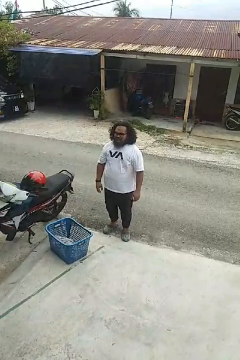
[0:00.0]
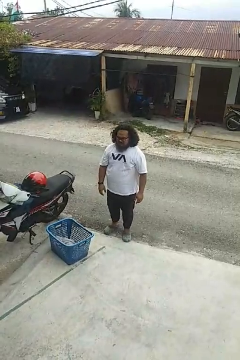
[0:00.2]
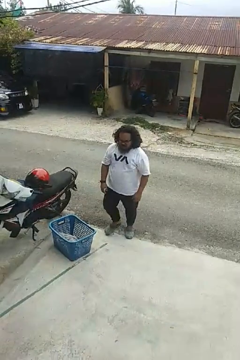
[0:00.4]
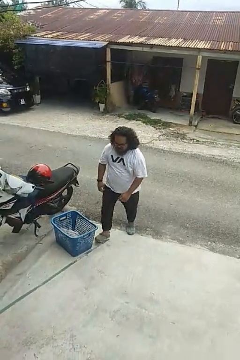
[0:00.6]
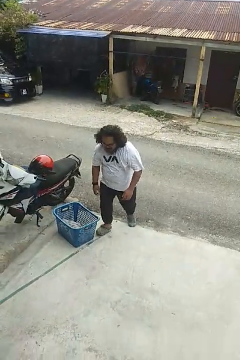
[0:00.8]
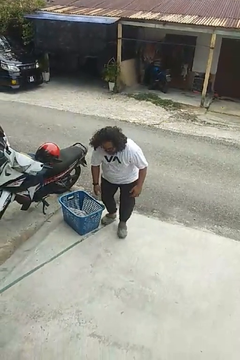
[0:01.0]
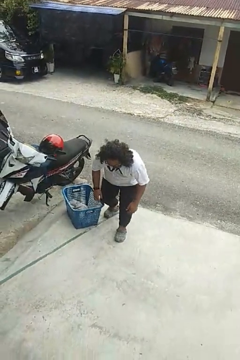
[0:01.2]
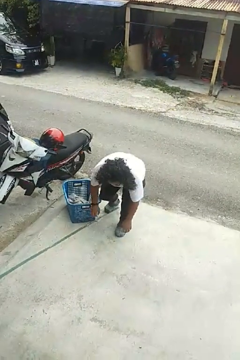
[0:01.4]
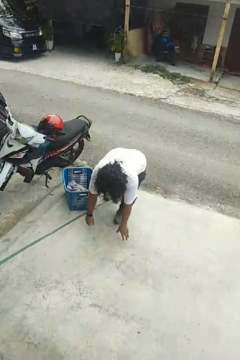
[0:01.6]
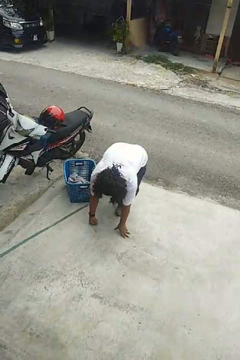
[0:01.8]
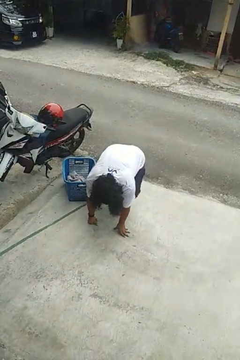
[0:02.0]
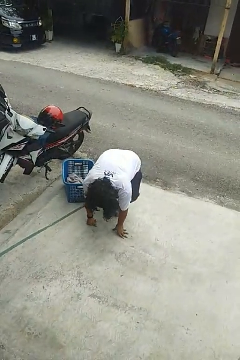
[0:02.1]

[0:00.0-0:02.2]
person trips on object on floor

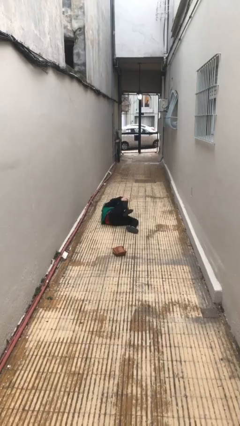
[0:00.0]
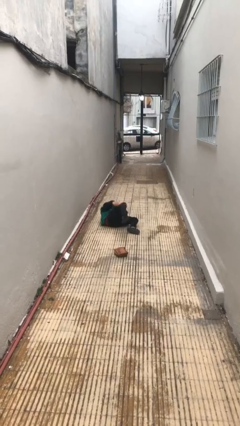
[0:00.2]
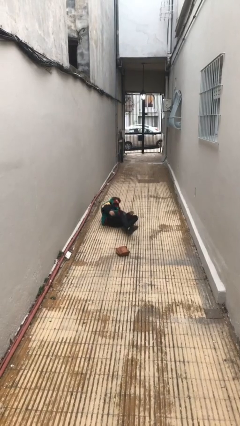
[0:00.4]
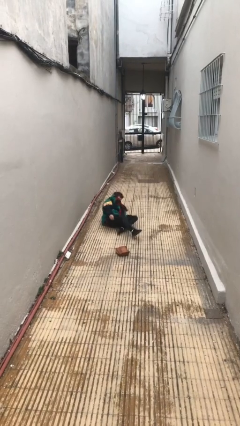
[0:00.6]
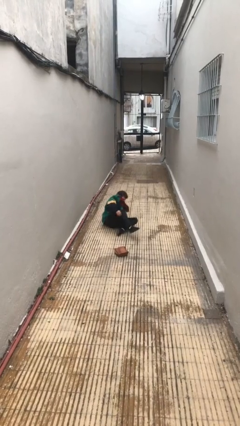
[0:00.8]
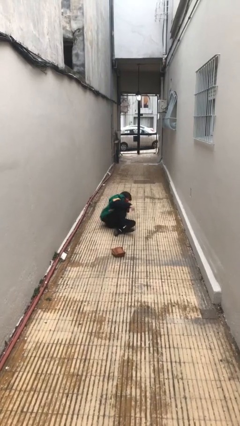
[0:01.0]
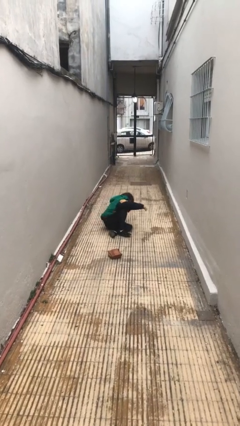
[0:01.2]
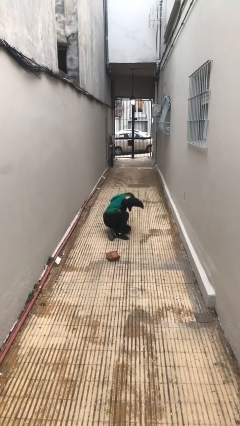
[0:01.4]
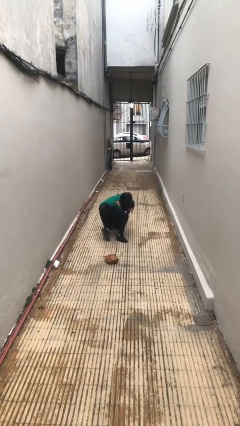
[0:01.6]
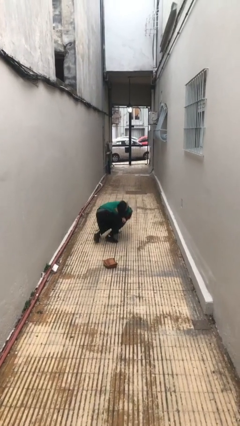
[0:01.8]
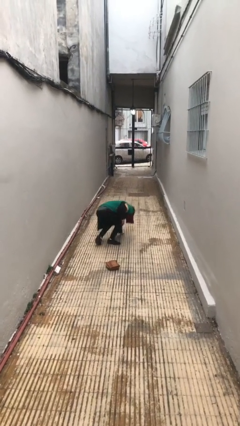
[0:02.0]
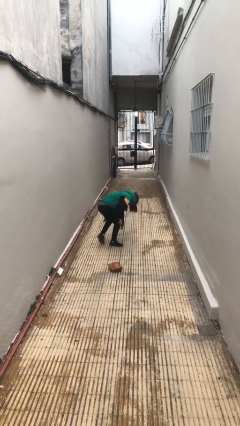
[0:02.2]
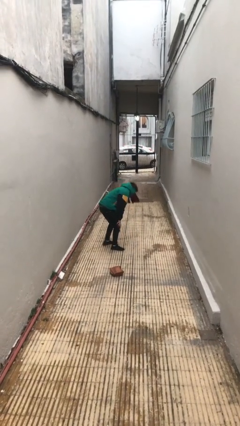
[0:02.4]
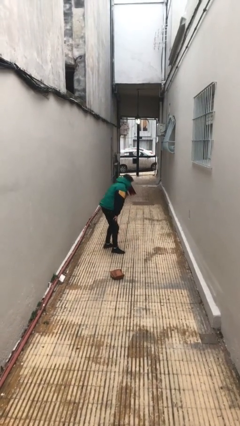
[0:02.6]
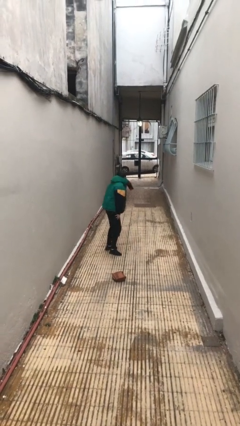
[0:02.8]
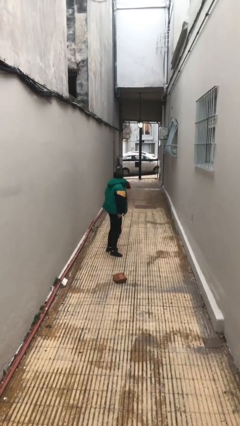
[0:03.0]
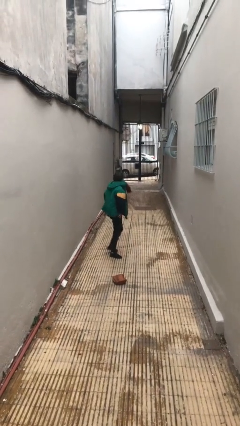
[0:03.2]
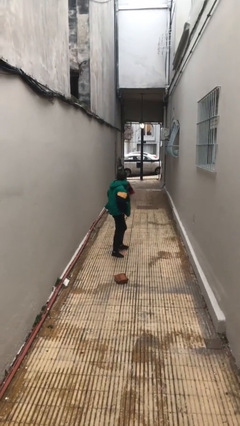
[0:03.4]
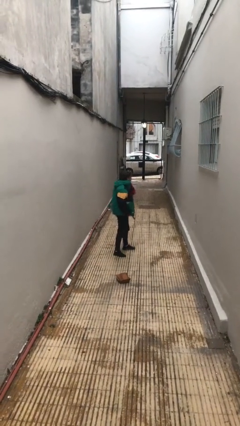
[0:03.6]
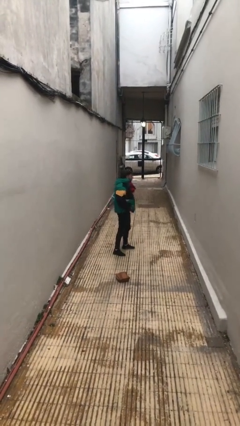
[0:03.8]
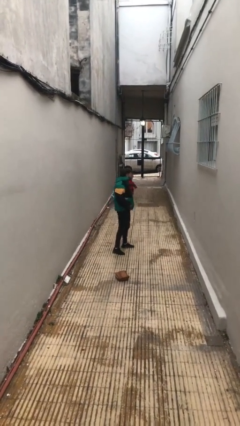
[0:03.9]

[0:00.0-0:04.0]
person stands up from floor

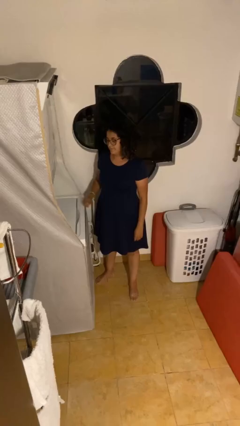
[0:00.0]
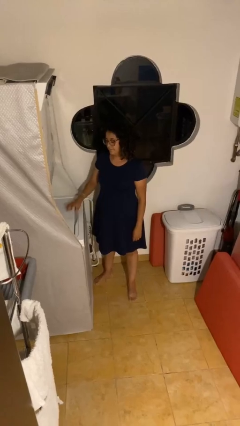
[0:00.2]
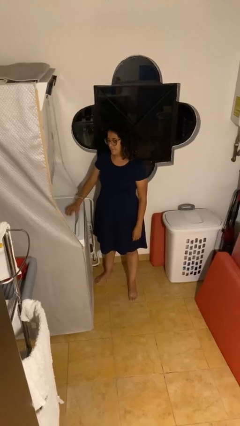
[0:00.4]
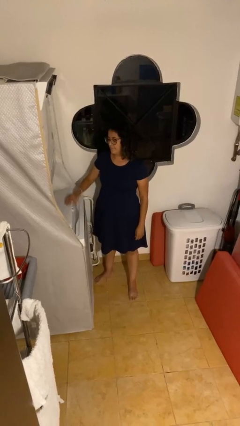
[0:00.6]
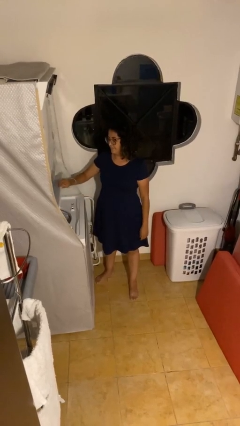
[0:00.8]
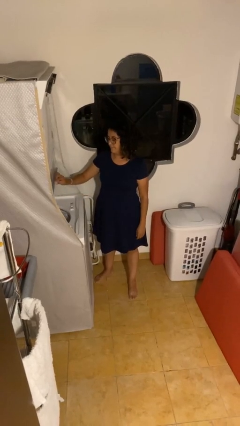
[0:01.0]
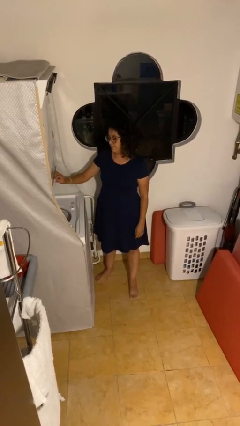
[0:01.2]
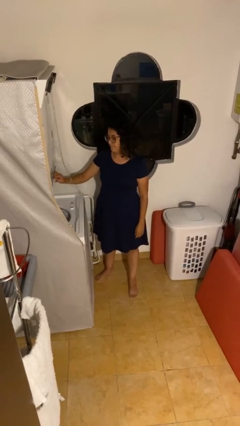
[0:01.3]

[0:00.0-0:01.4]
person opens clothes washer

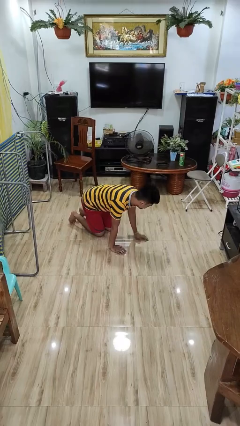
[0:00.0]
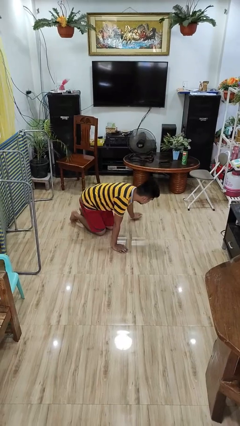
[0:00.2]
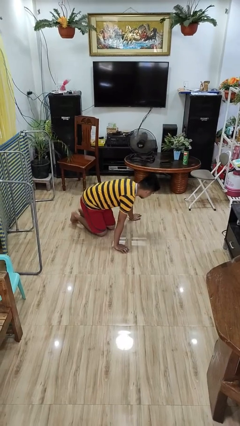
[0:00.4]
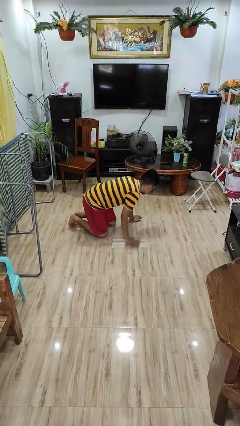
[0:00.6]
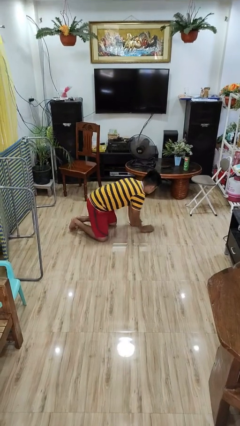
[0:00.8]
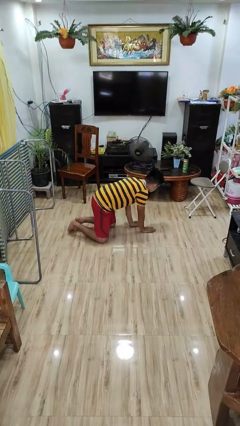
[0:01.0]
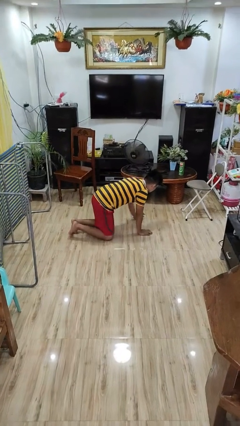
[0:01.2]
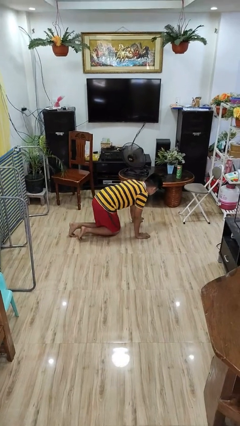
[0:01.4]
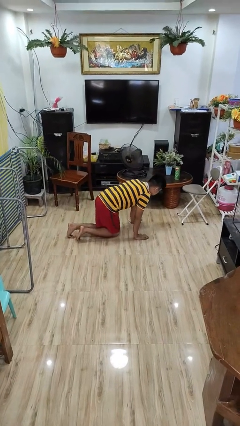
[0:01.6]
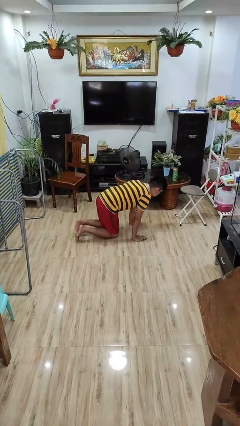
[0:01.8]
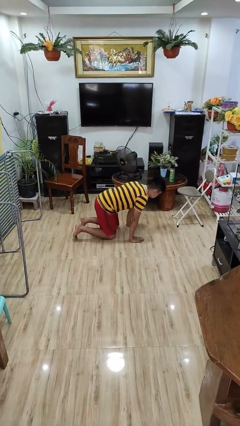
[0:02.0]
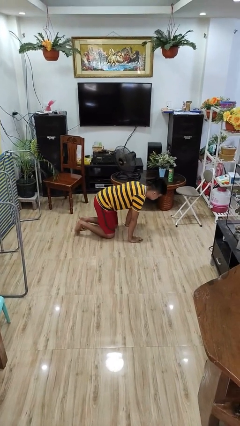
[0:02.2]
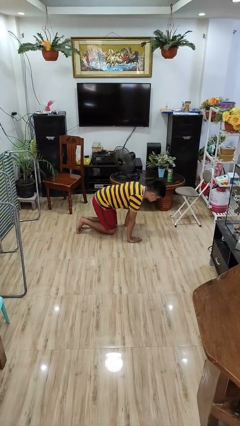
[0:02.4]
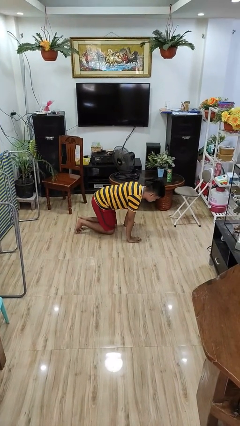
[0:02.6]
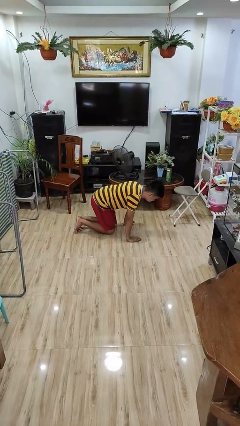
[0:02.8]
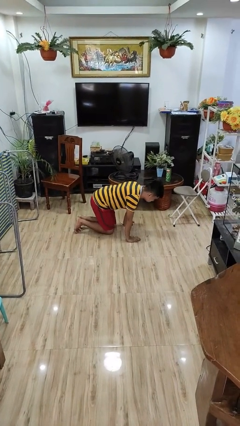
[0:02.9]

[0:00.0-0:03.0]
person crawls

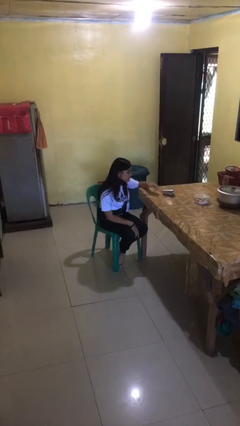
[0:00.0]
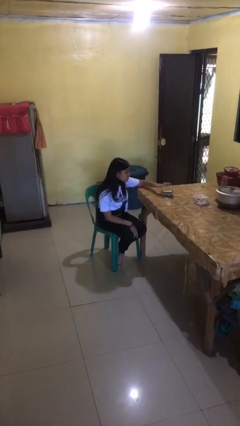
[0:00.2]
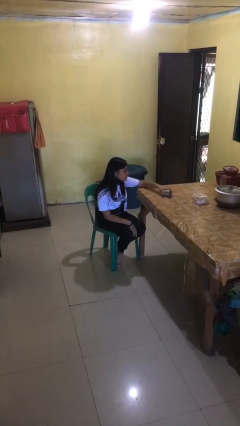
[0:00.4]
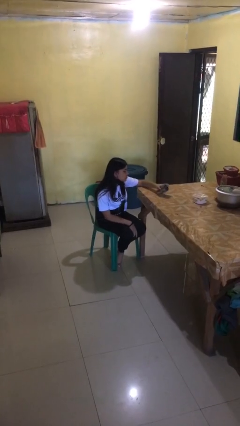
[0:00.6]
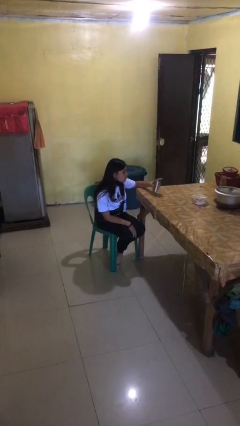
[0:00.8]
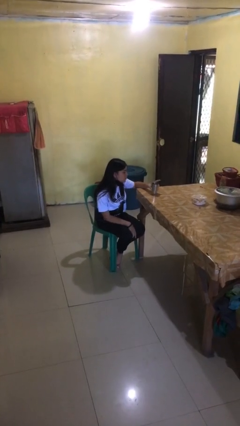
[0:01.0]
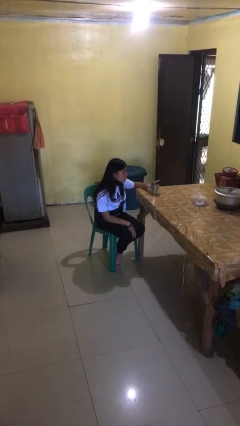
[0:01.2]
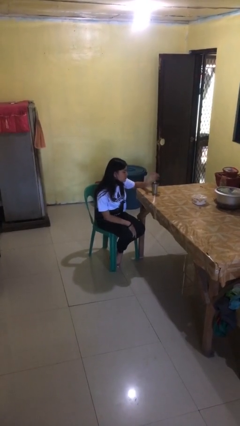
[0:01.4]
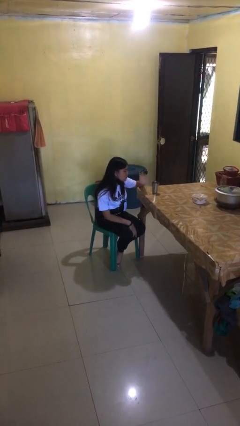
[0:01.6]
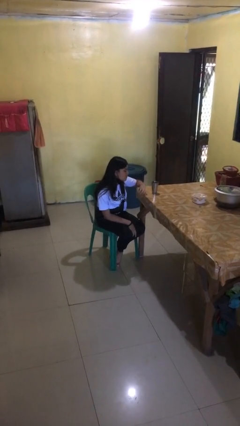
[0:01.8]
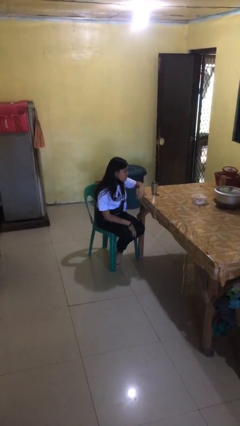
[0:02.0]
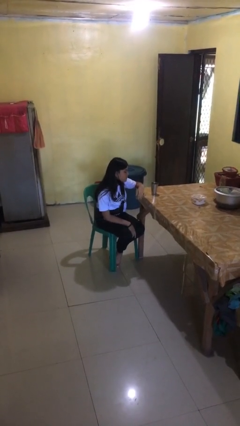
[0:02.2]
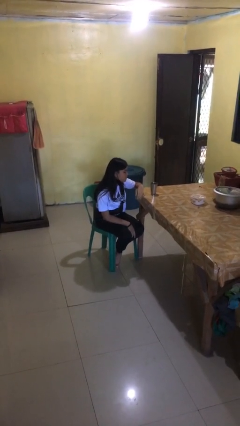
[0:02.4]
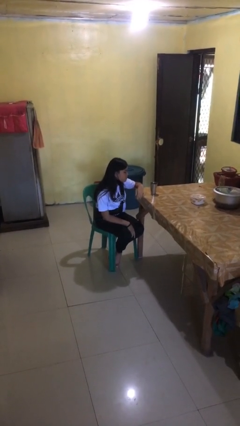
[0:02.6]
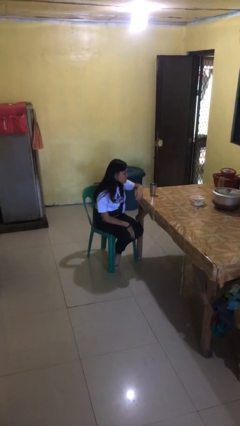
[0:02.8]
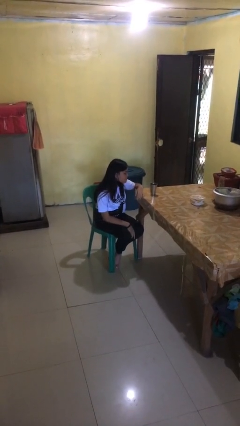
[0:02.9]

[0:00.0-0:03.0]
person sets upright glass

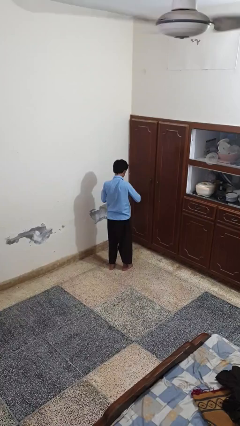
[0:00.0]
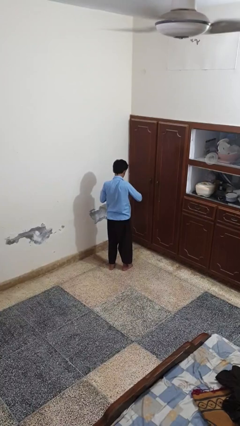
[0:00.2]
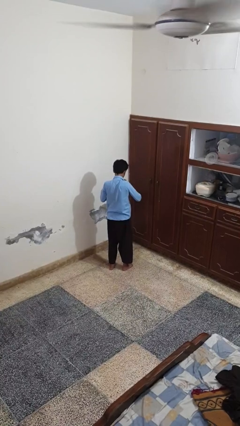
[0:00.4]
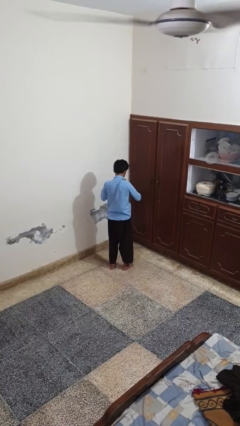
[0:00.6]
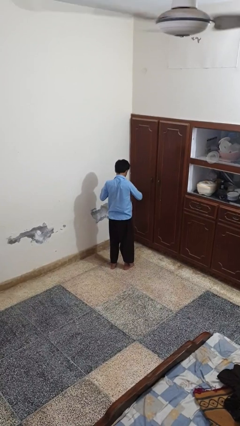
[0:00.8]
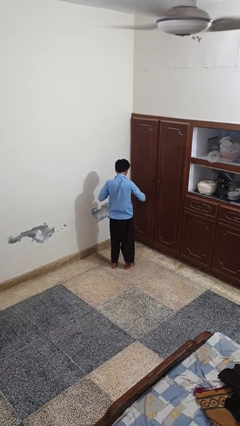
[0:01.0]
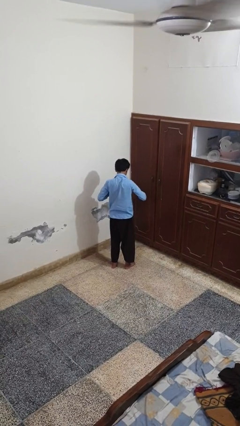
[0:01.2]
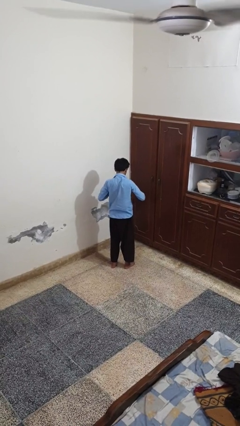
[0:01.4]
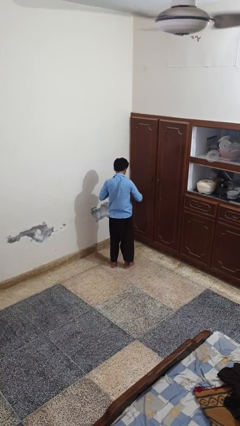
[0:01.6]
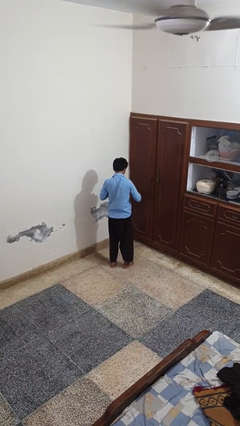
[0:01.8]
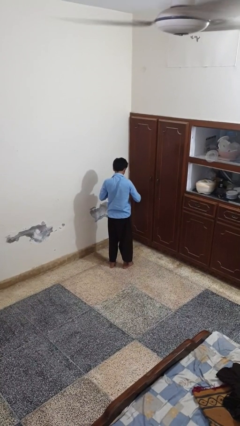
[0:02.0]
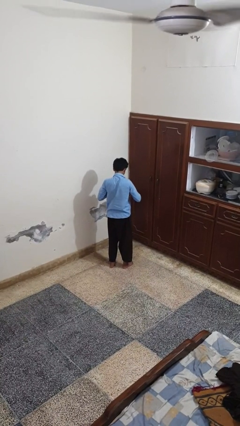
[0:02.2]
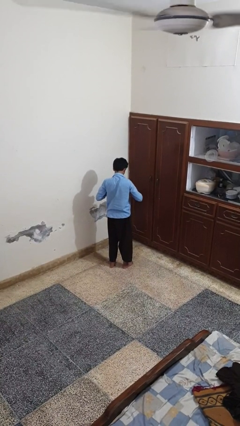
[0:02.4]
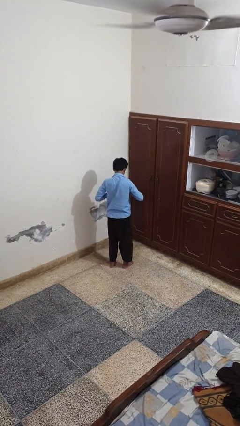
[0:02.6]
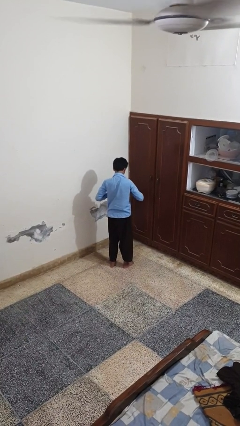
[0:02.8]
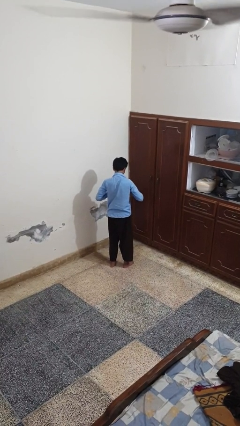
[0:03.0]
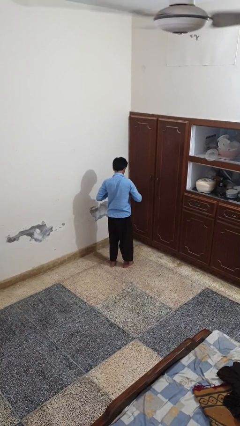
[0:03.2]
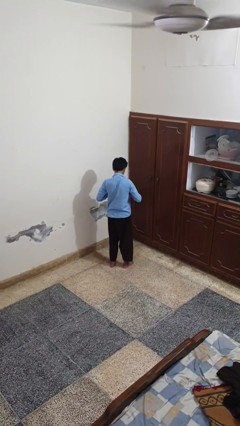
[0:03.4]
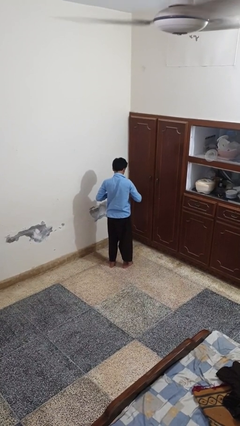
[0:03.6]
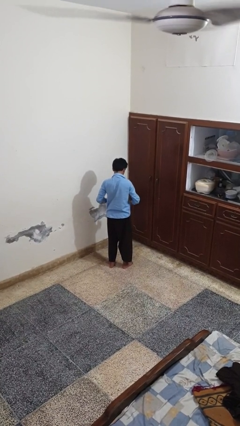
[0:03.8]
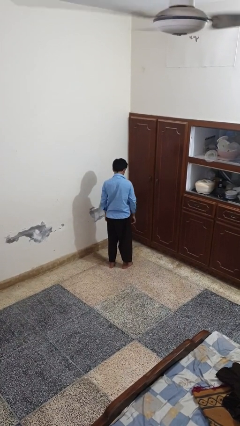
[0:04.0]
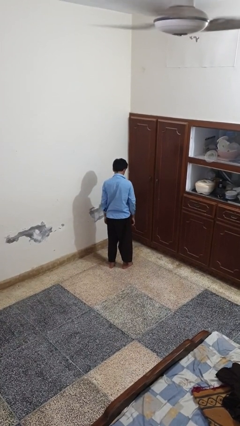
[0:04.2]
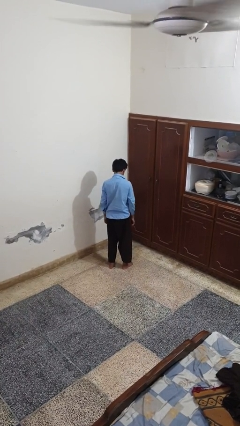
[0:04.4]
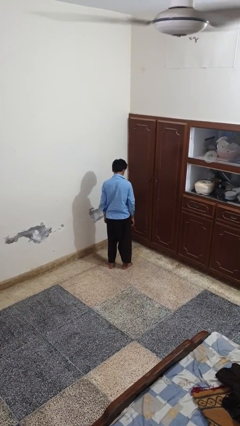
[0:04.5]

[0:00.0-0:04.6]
person unbuttons shirt
